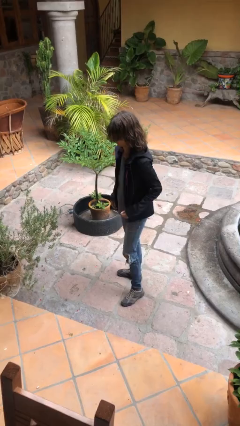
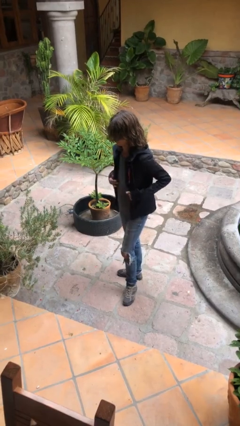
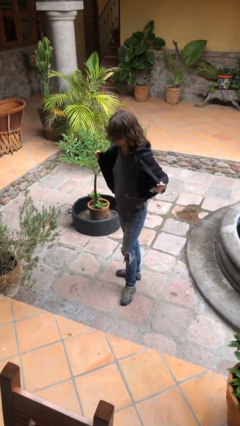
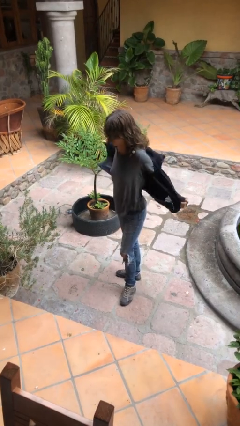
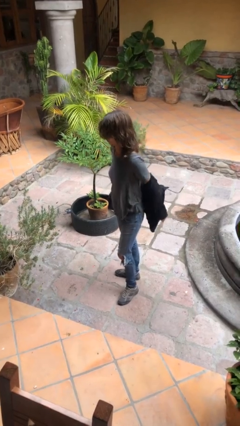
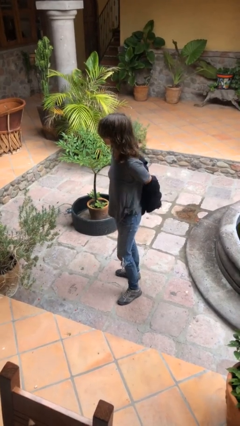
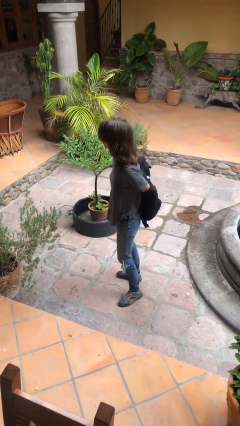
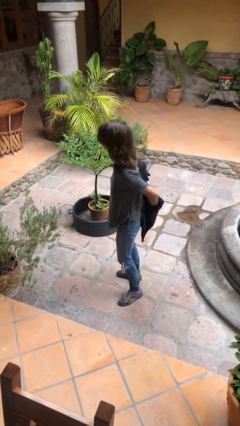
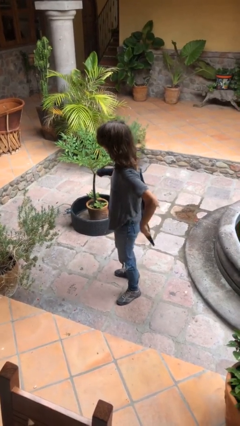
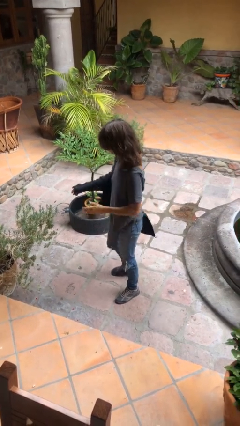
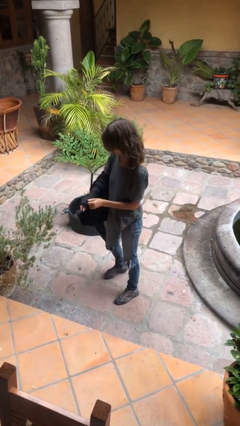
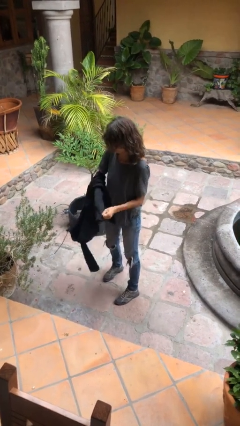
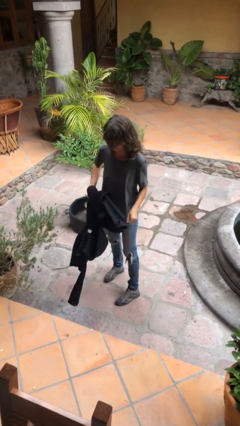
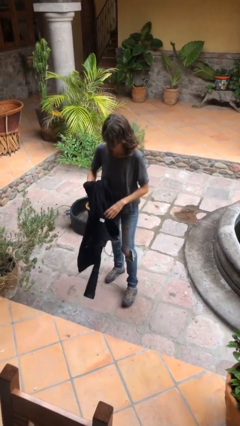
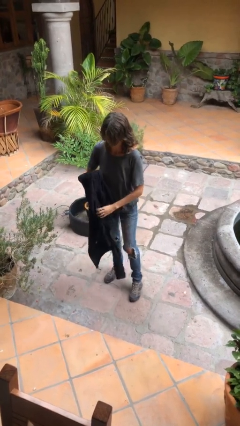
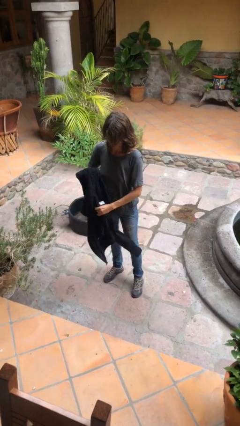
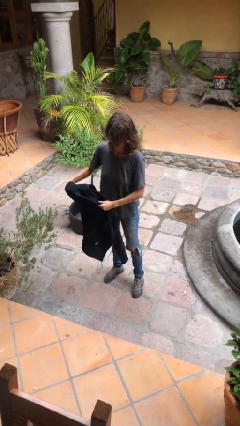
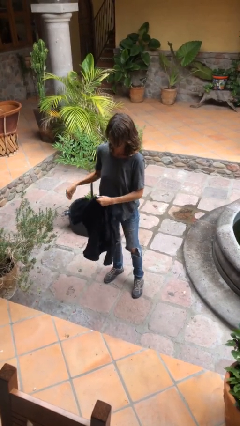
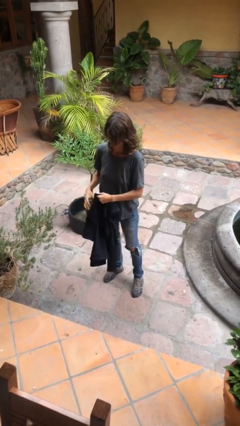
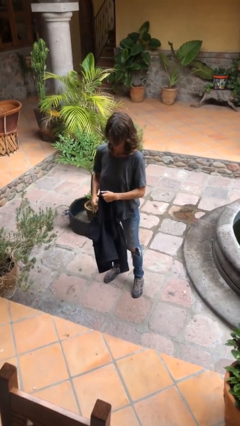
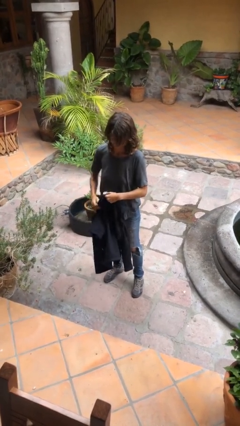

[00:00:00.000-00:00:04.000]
person takes off jacket

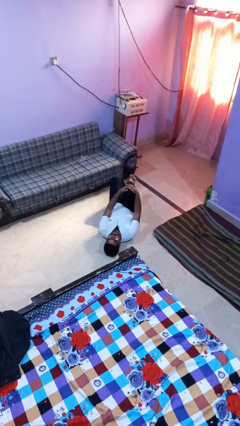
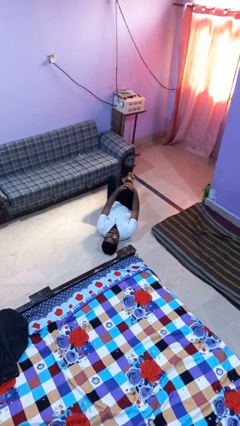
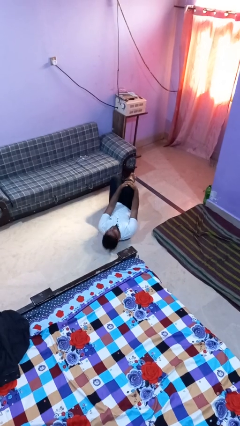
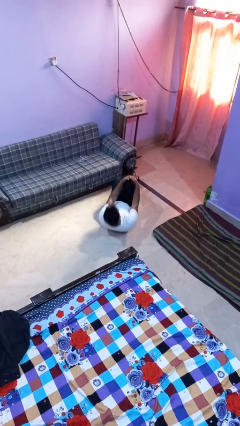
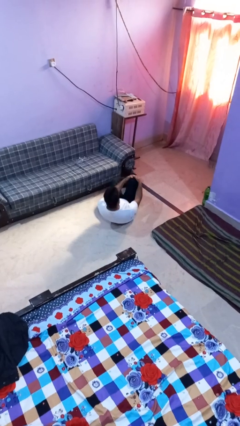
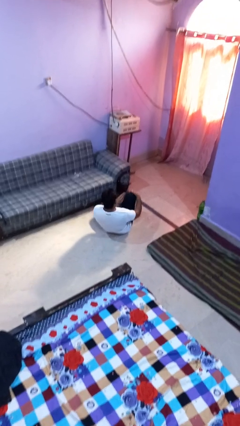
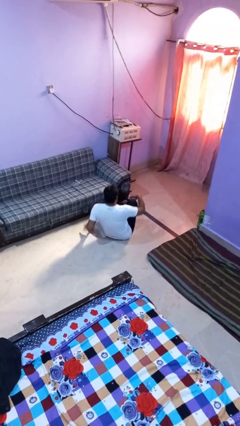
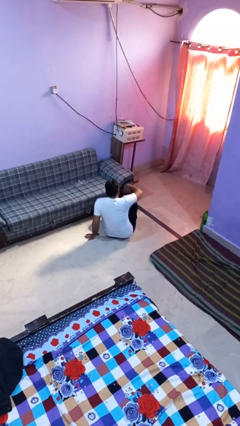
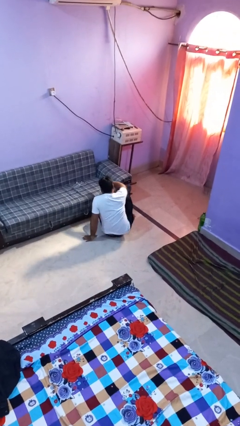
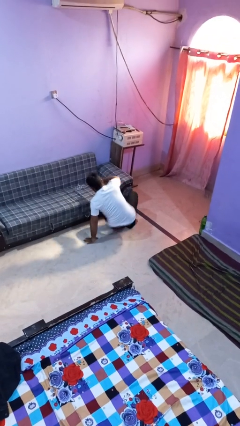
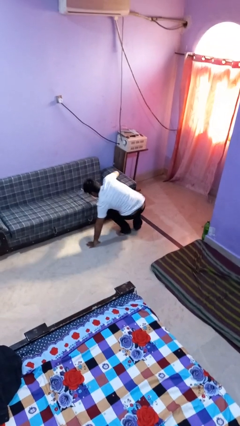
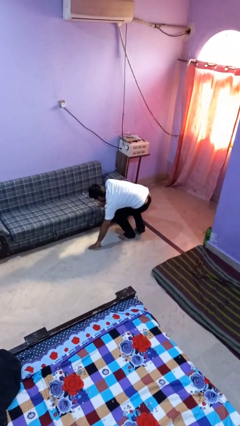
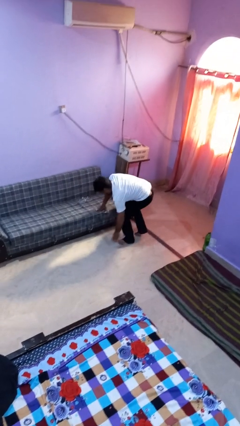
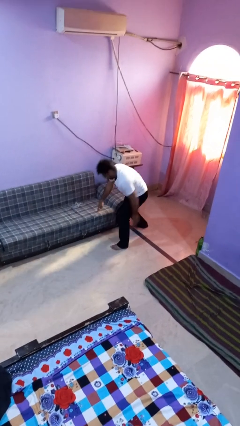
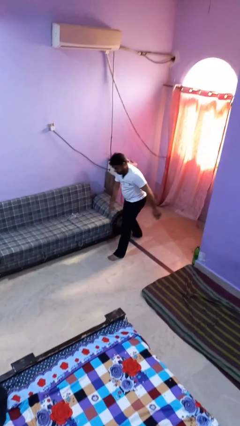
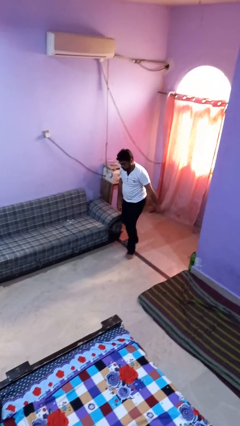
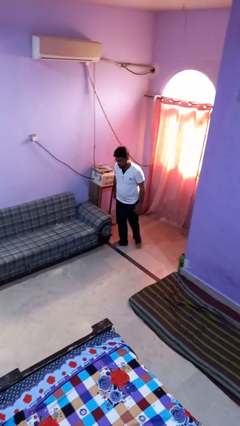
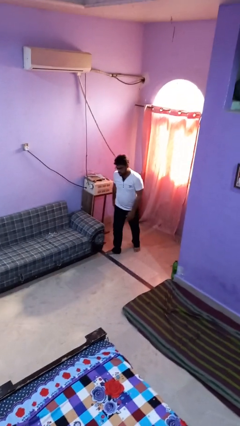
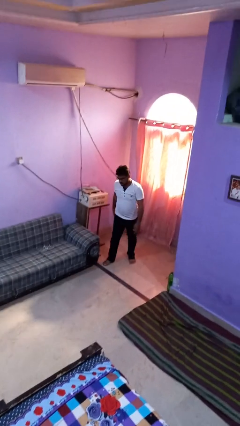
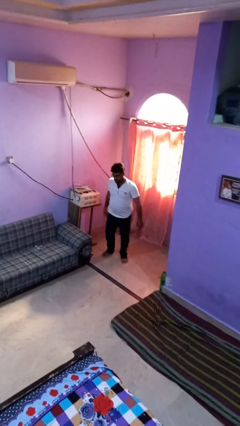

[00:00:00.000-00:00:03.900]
person stands up from floor

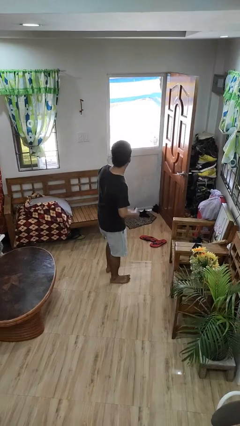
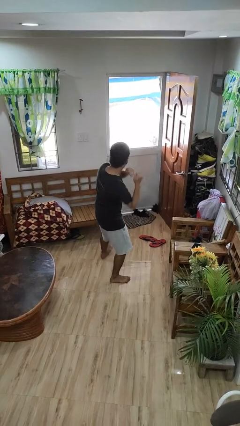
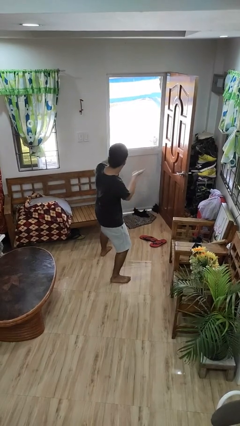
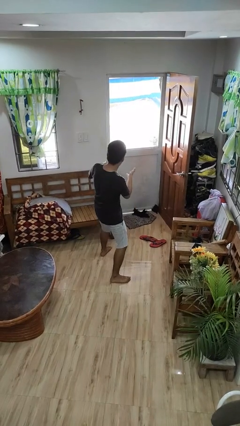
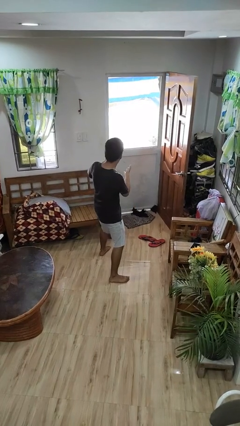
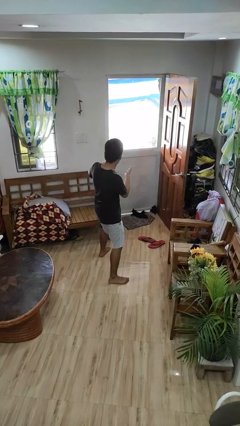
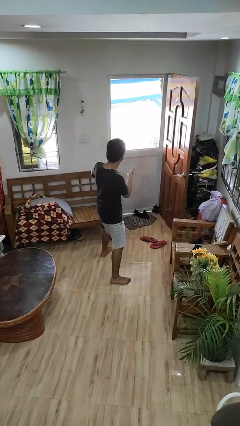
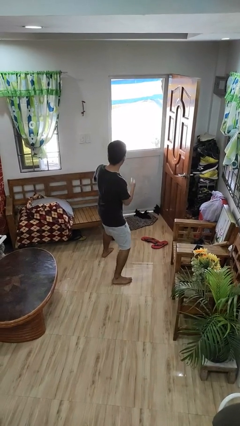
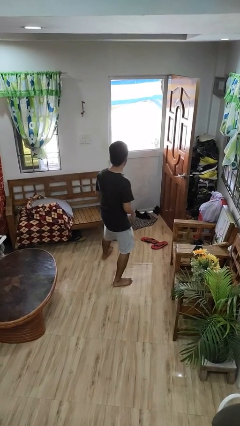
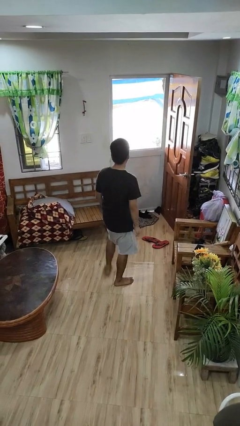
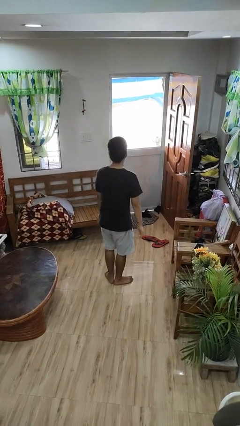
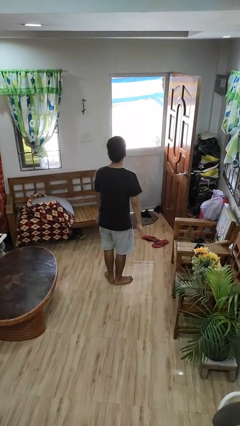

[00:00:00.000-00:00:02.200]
person karate chop

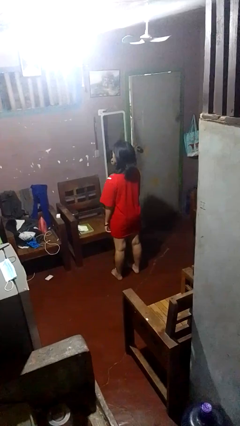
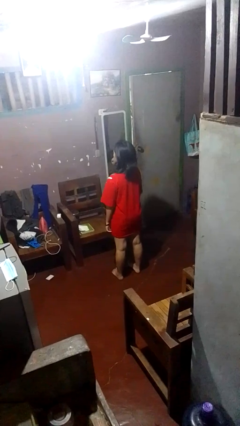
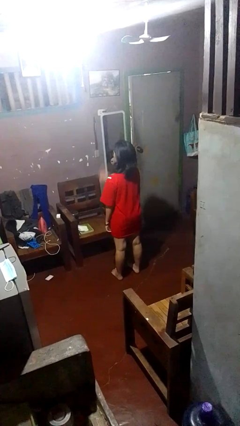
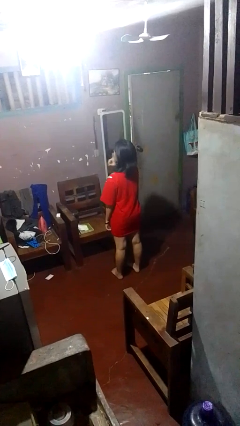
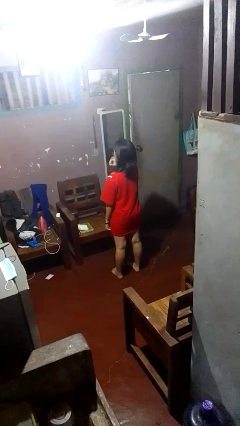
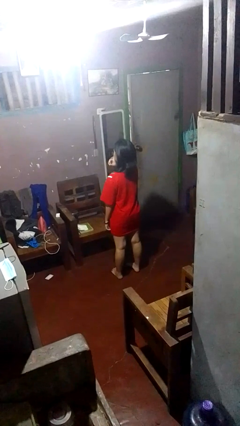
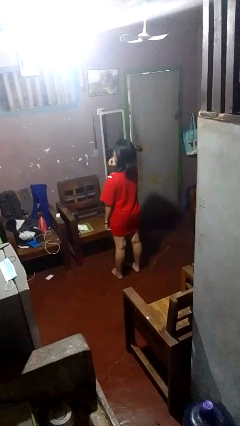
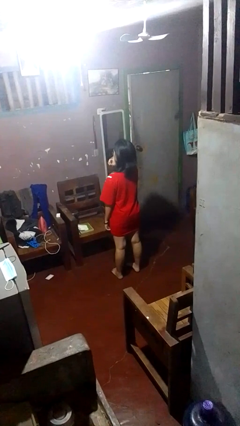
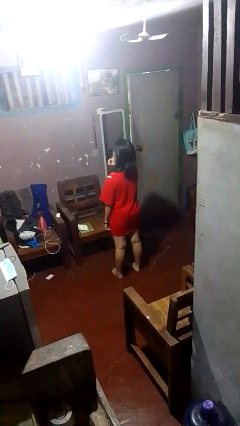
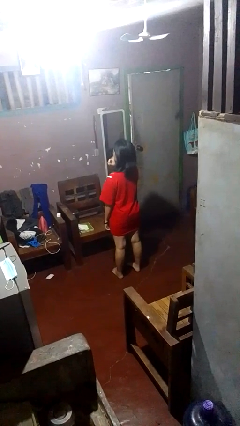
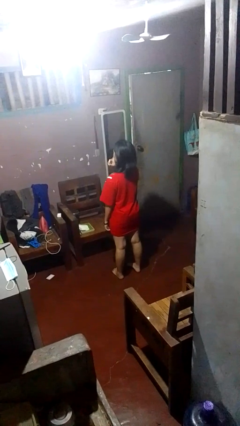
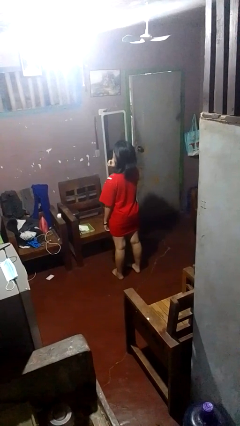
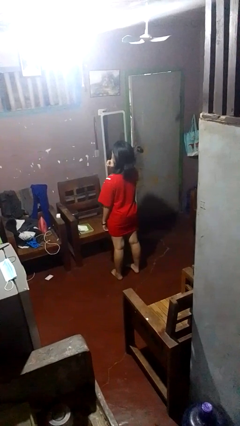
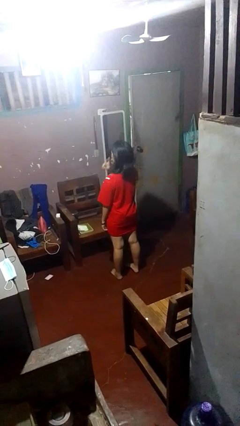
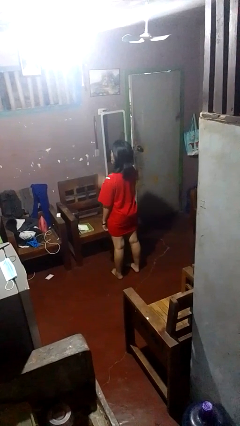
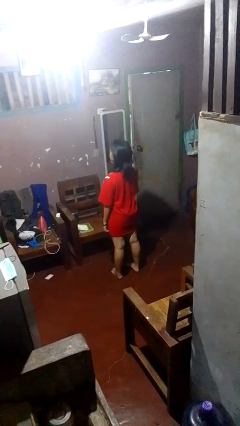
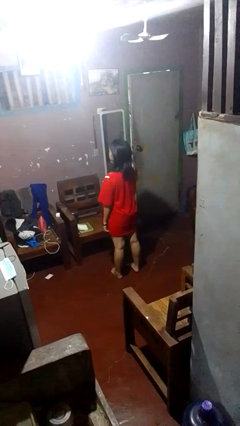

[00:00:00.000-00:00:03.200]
person gestures be quiet

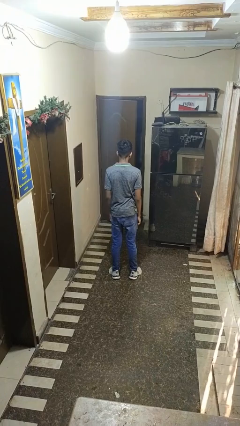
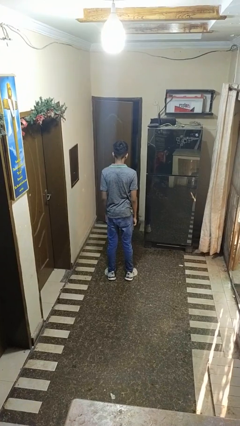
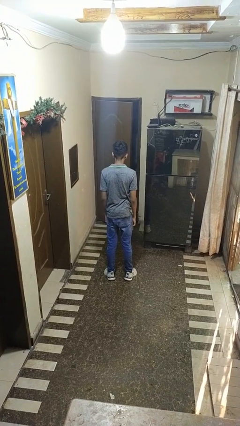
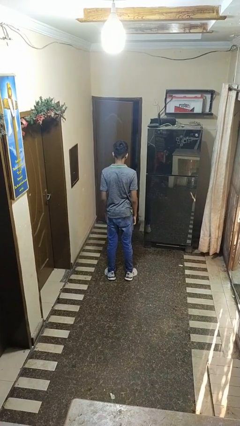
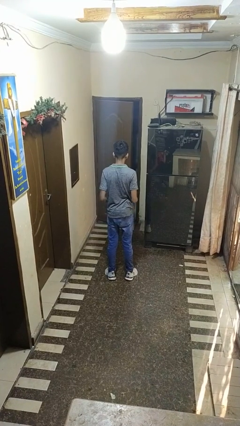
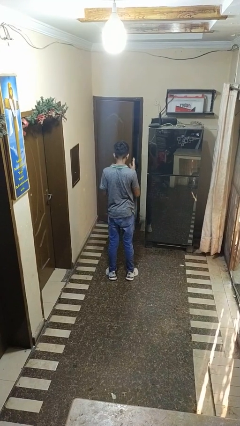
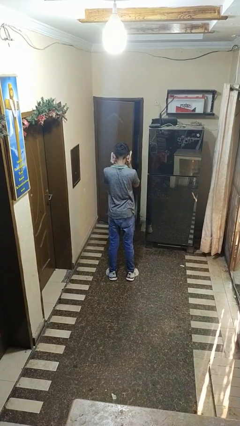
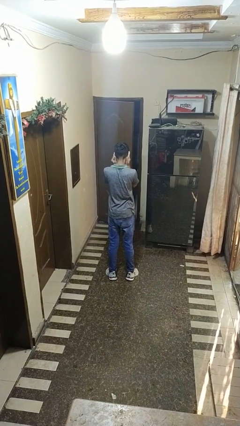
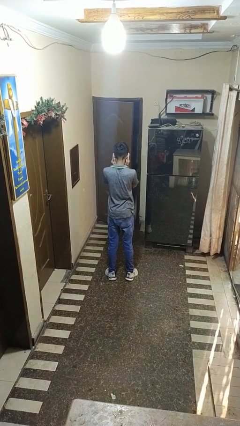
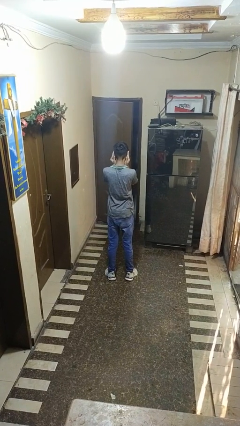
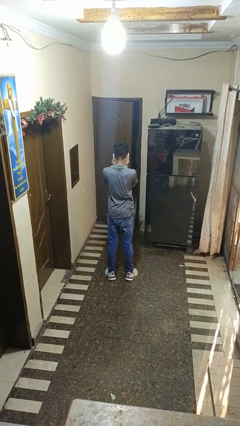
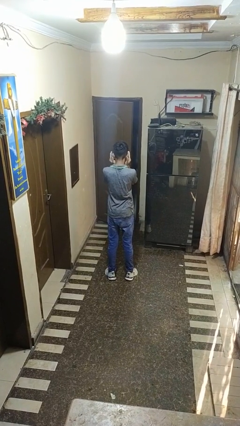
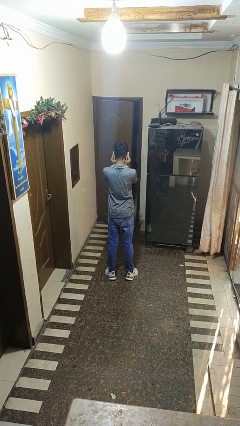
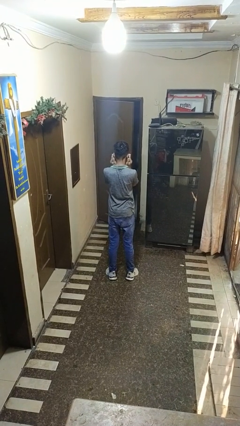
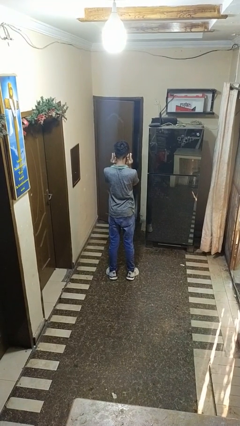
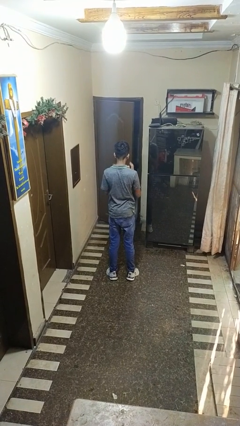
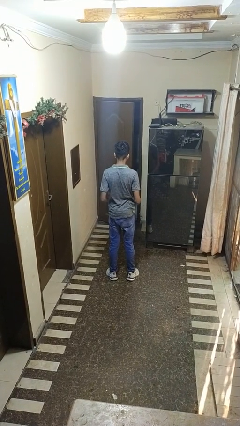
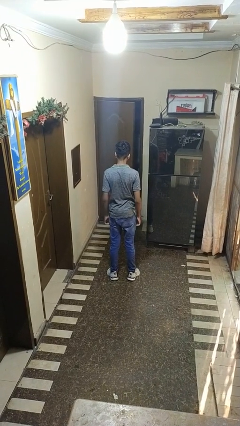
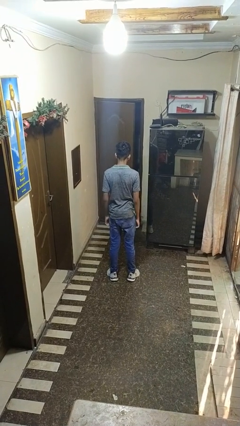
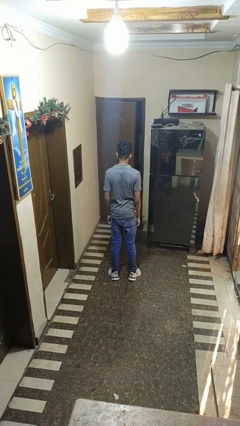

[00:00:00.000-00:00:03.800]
person touches earlobe

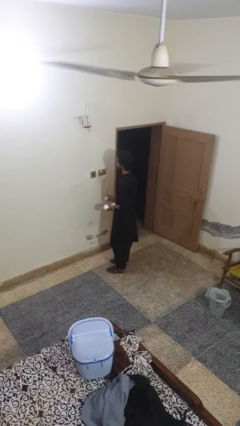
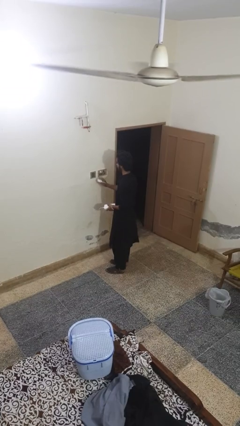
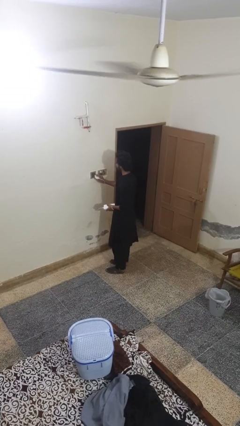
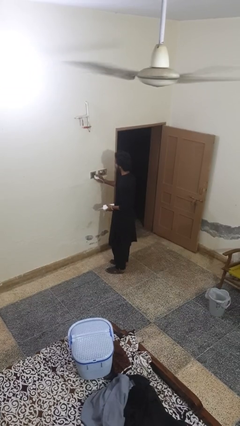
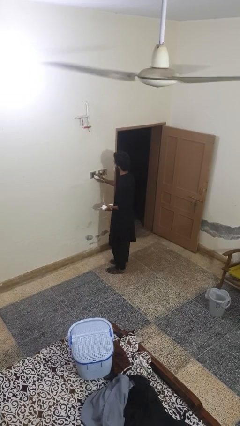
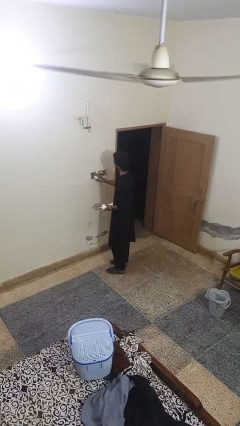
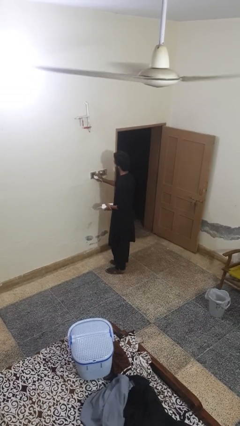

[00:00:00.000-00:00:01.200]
person plugs into electrical socket
